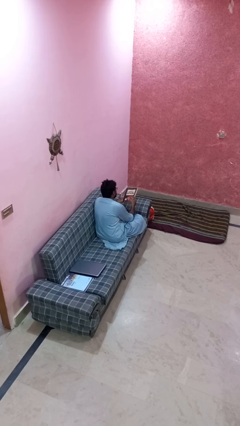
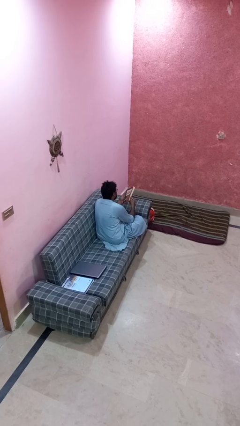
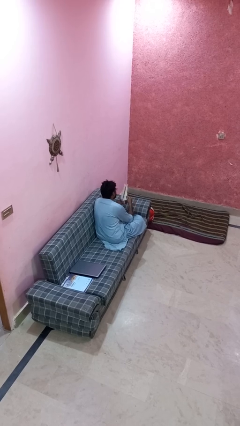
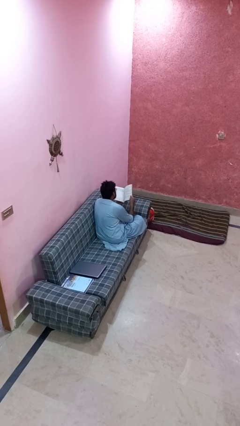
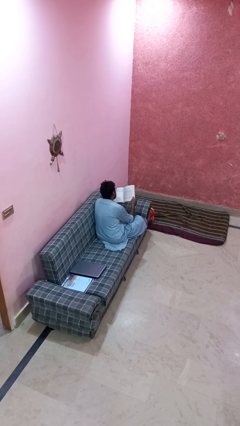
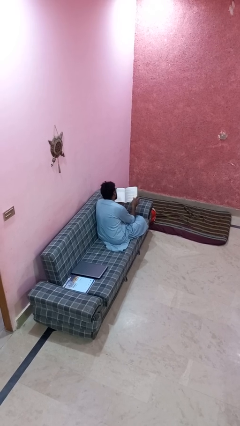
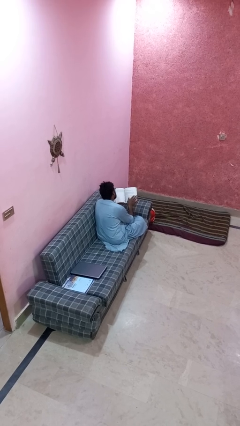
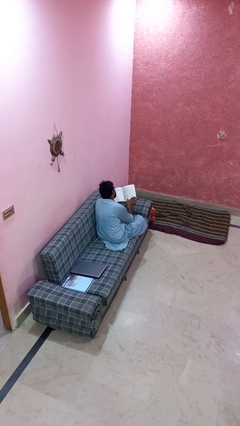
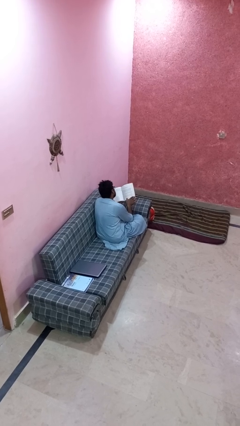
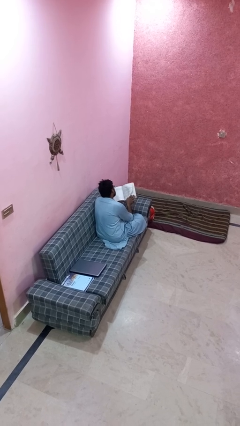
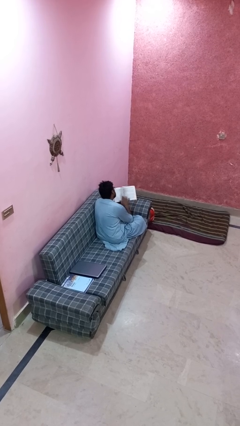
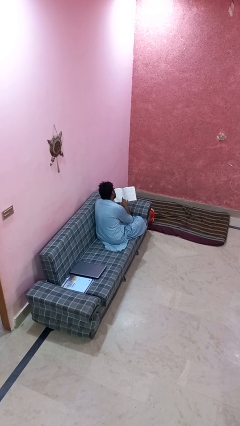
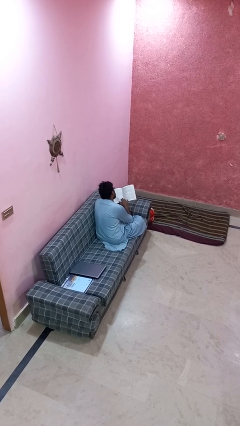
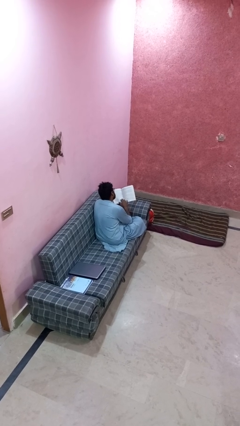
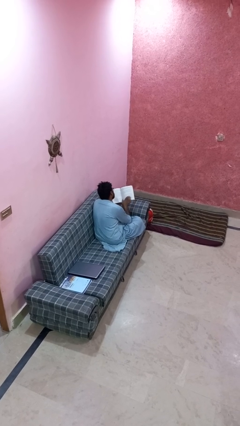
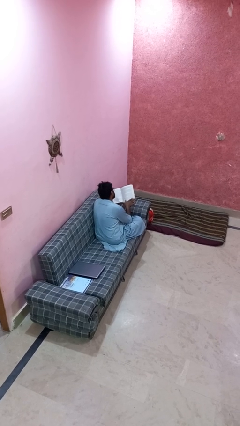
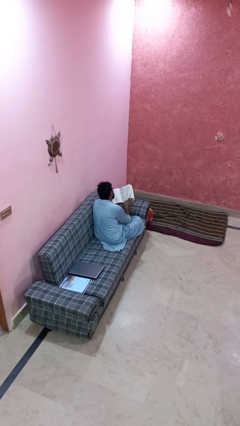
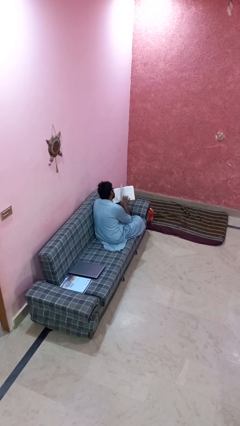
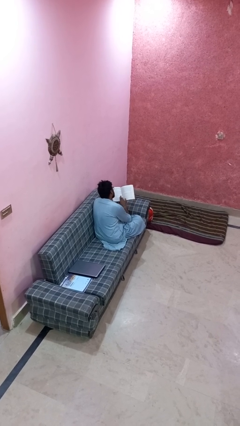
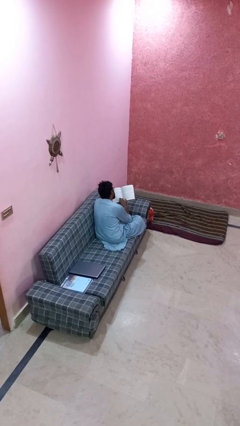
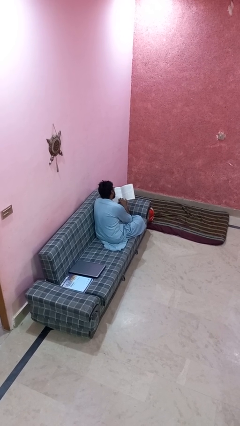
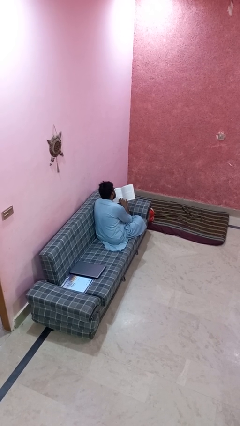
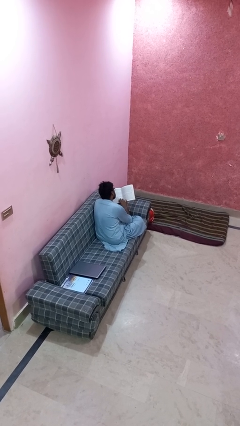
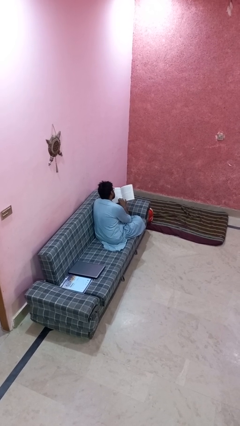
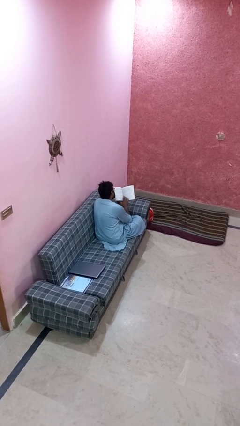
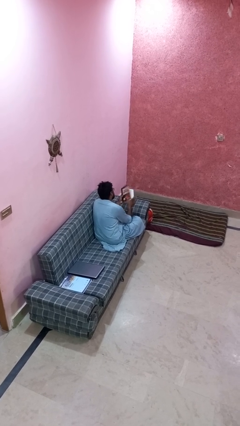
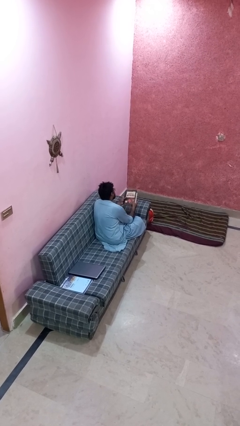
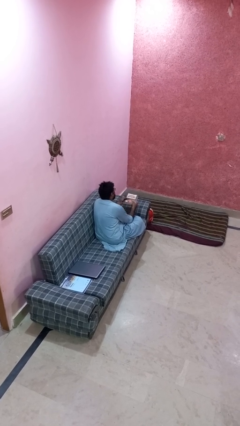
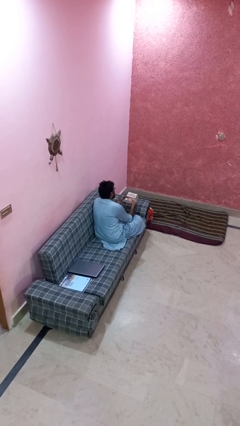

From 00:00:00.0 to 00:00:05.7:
person reads book

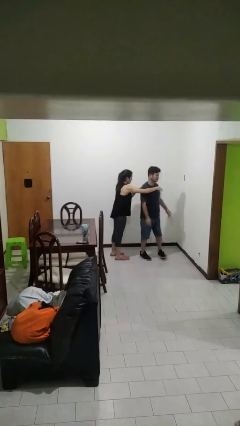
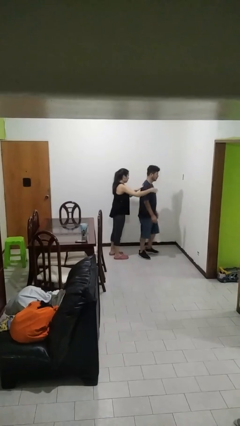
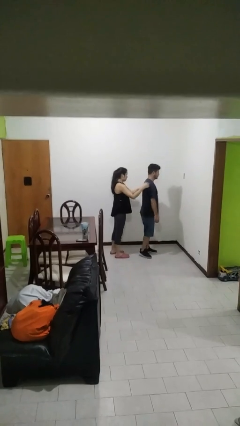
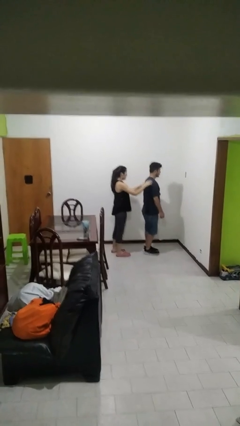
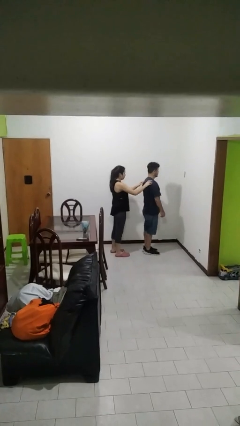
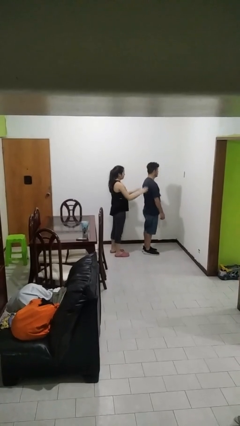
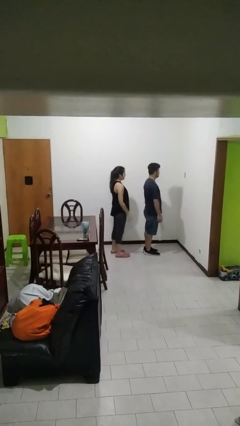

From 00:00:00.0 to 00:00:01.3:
person spins person around

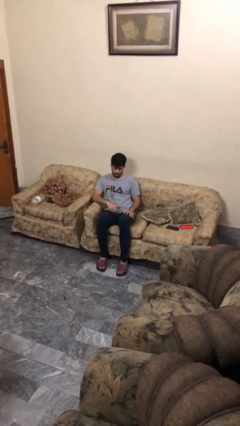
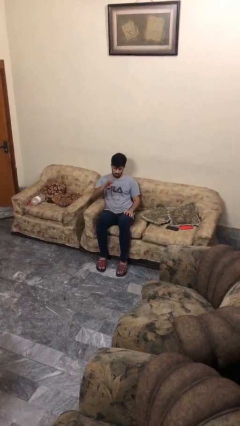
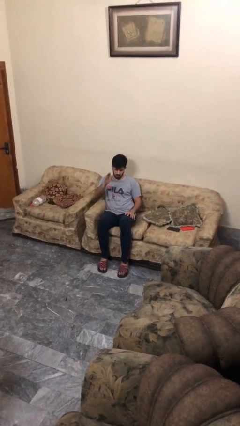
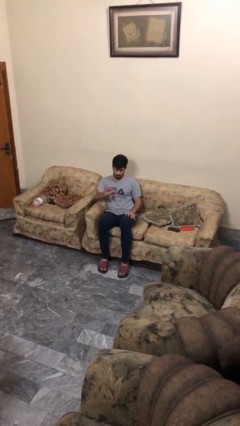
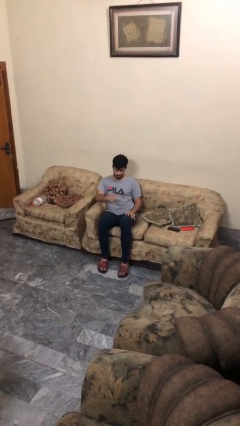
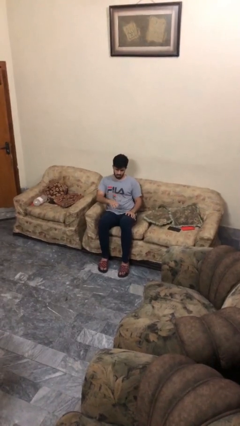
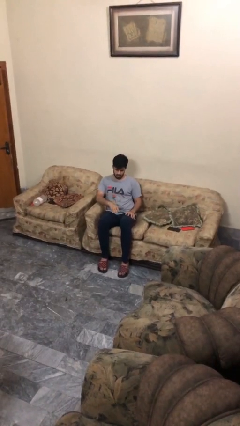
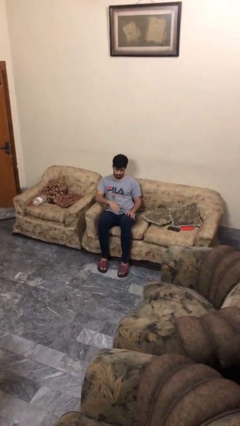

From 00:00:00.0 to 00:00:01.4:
person gestures swipe down

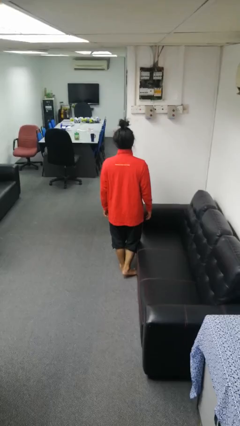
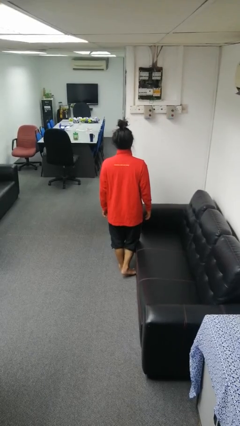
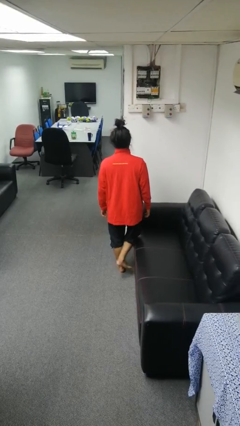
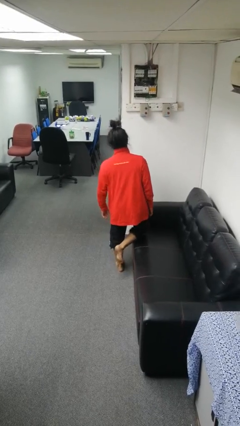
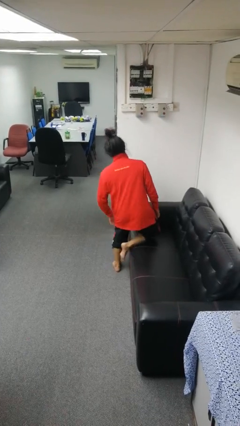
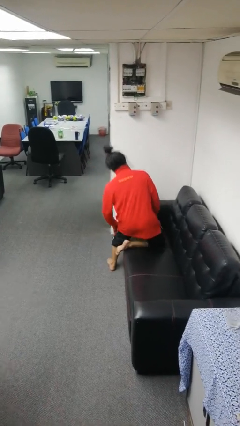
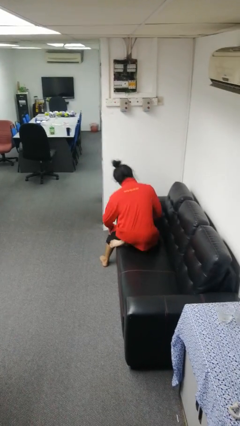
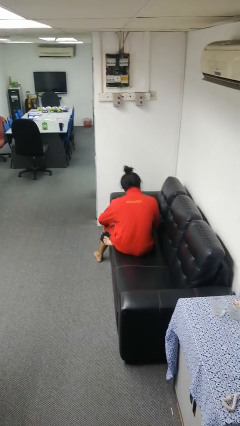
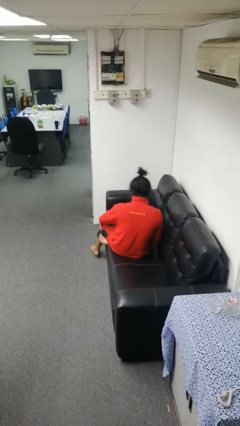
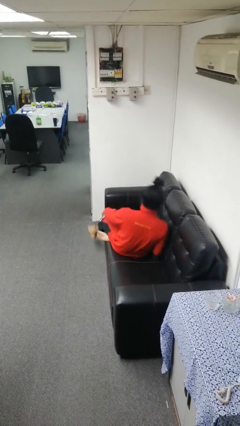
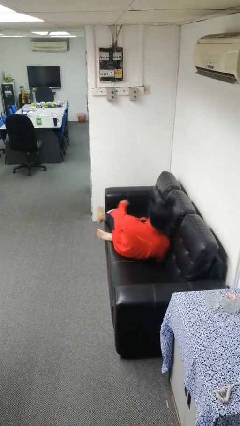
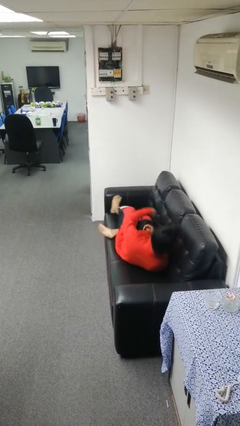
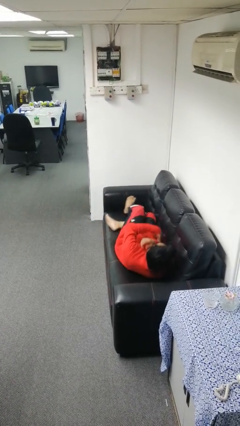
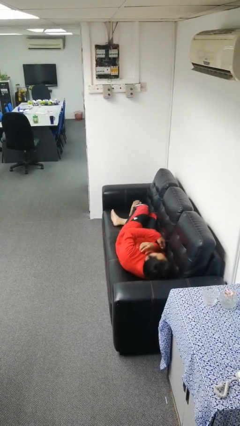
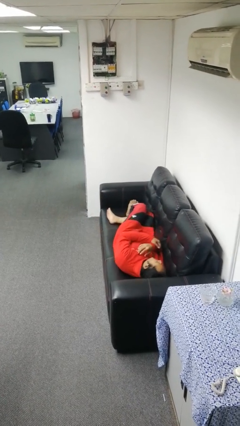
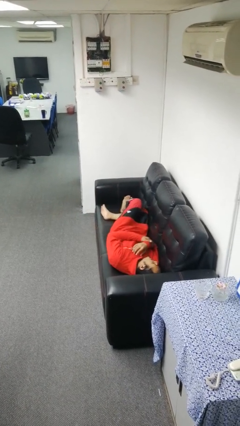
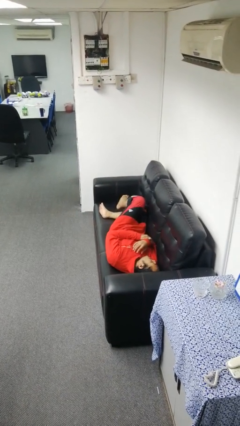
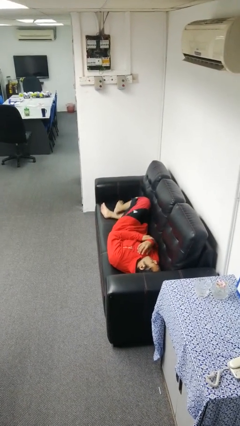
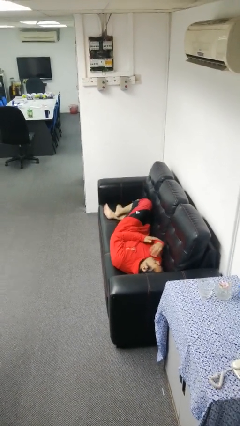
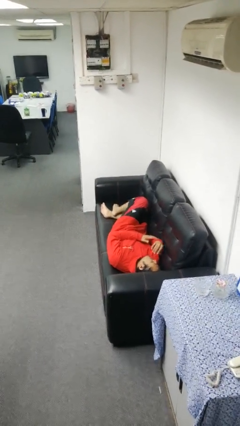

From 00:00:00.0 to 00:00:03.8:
person lies down on couch

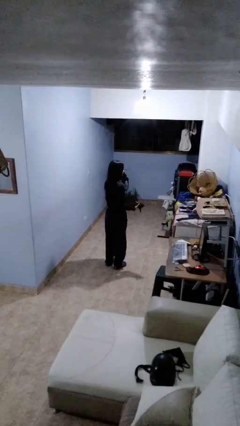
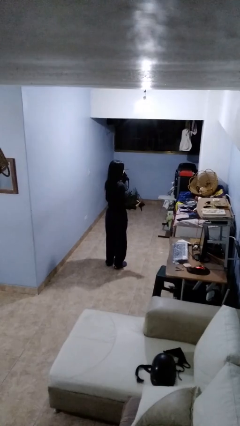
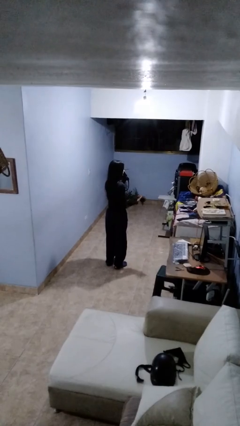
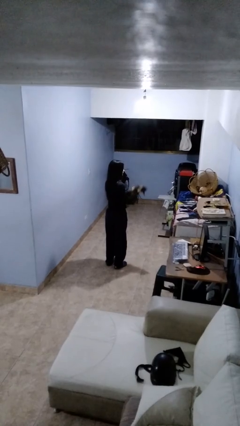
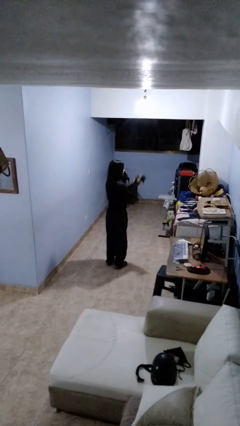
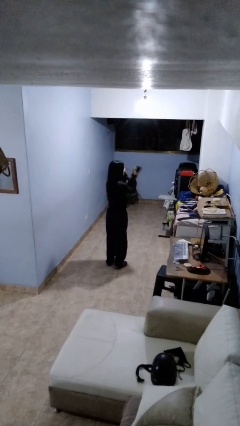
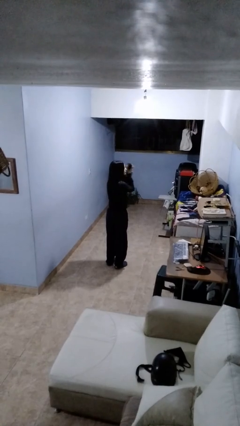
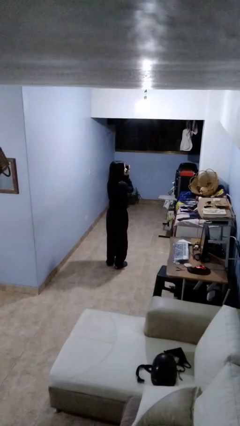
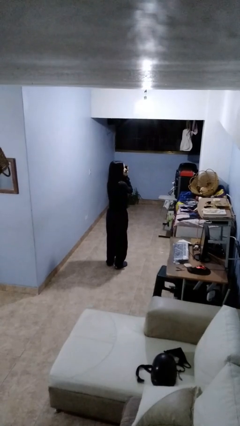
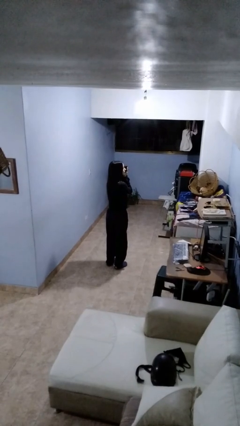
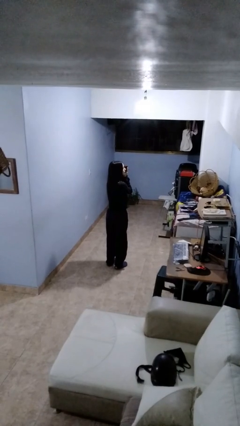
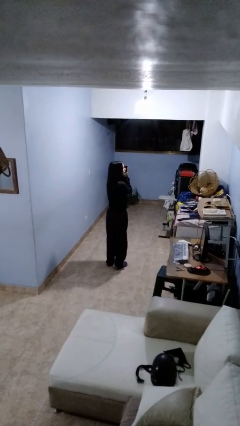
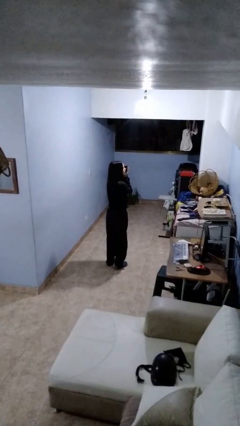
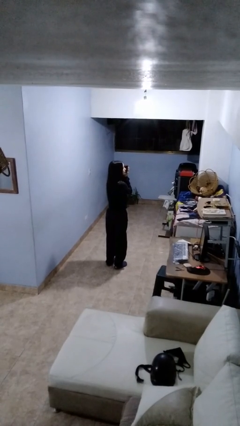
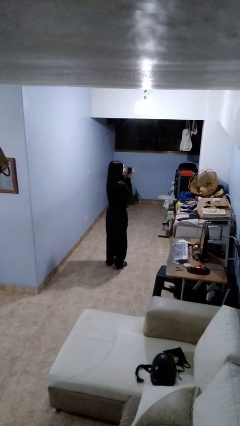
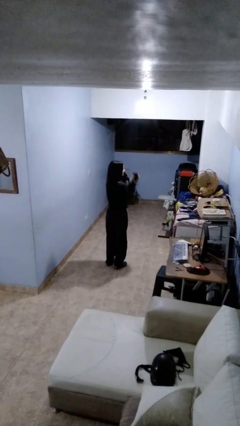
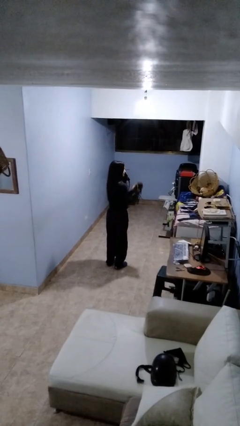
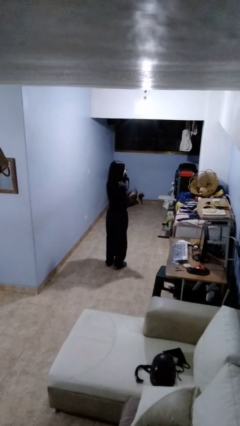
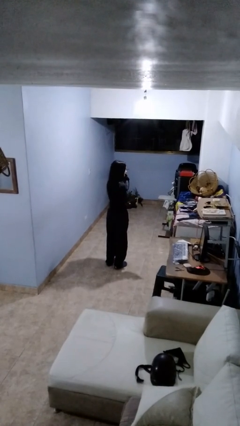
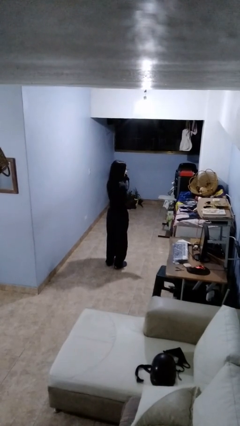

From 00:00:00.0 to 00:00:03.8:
person hugs cat

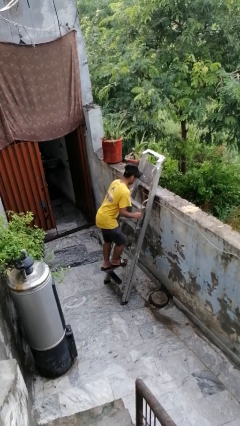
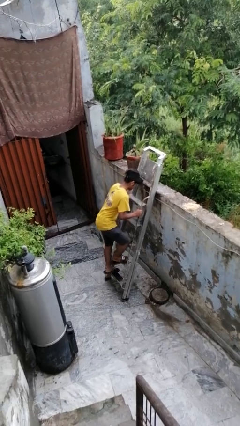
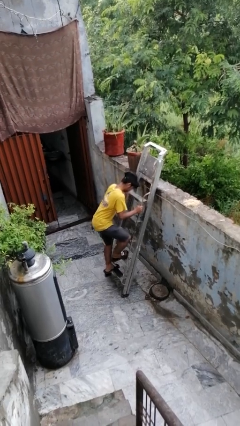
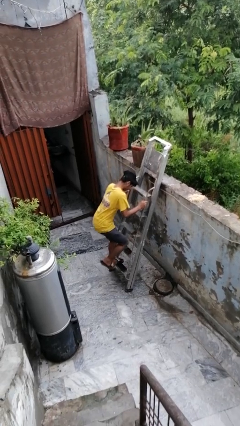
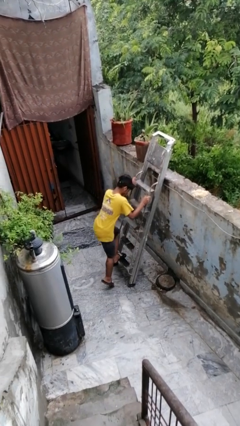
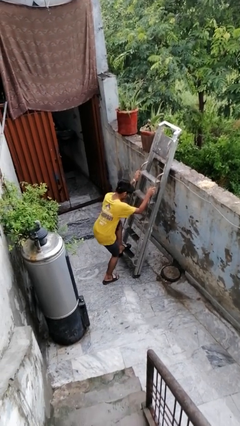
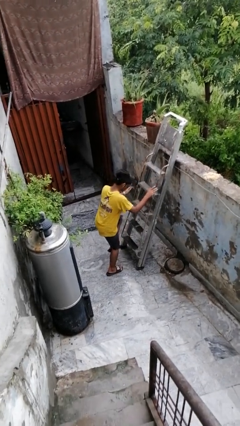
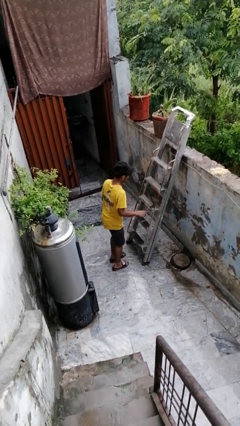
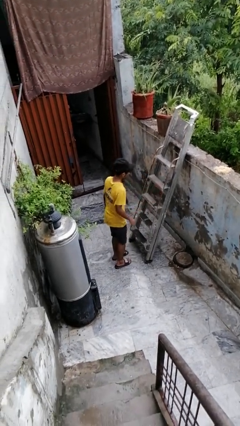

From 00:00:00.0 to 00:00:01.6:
person climbs down ladder
